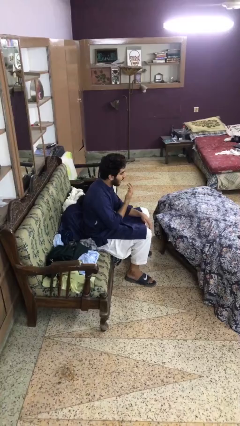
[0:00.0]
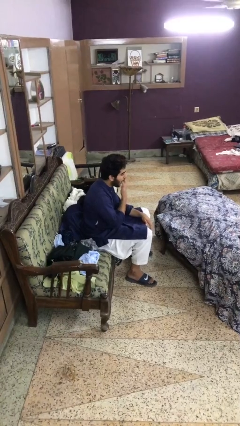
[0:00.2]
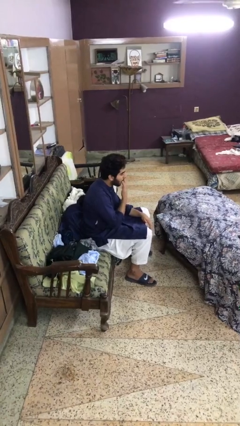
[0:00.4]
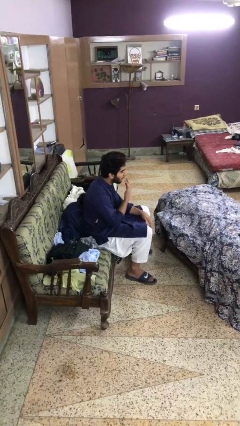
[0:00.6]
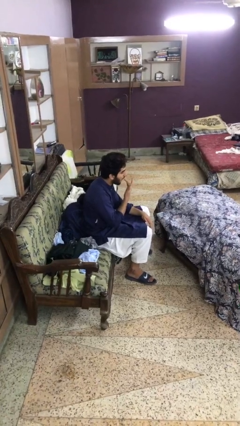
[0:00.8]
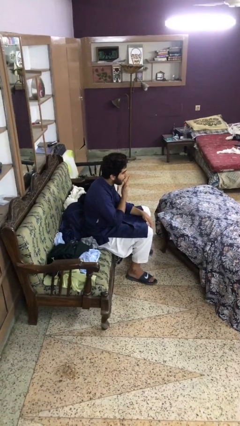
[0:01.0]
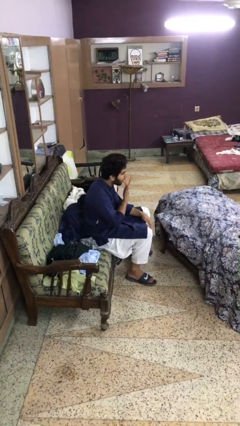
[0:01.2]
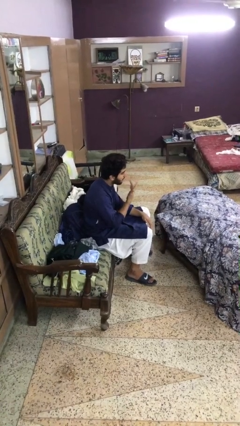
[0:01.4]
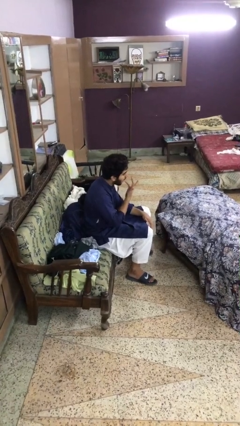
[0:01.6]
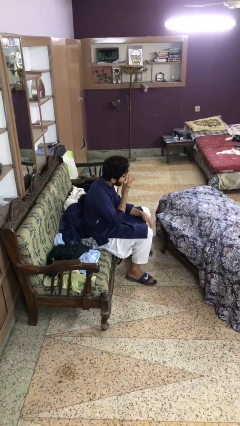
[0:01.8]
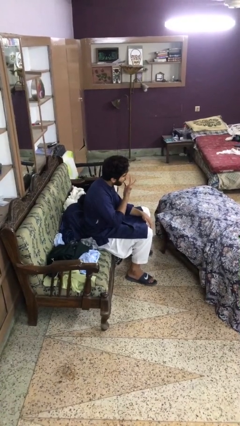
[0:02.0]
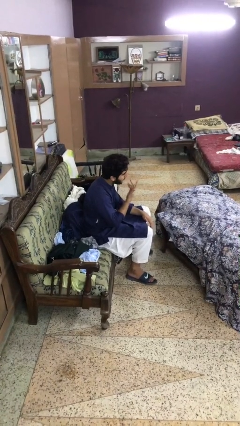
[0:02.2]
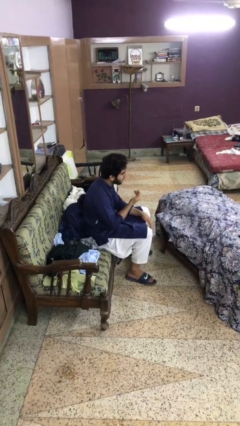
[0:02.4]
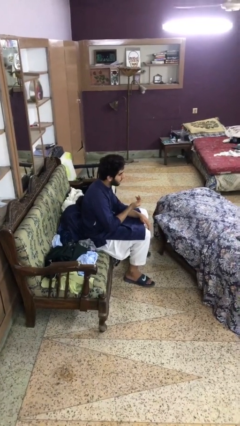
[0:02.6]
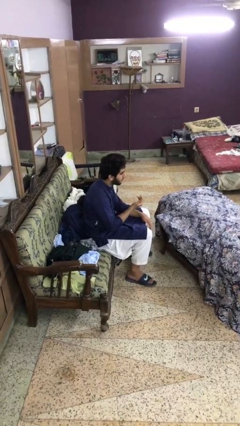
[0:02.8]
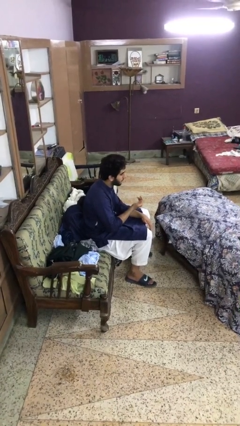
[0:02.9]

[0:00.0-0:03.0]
person licks fingers

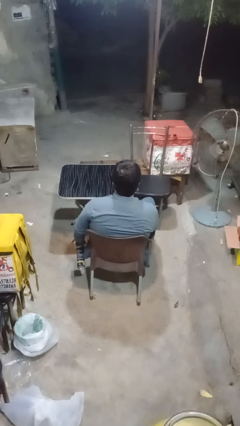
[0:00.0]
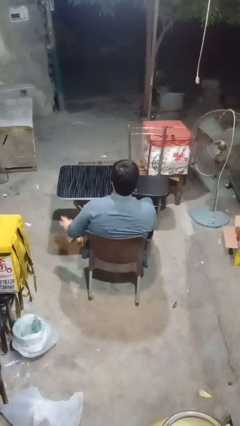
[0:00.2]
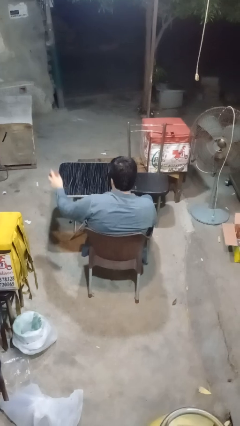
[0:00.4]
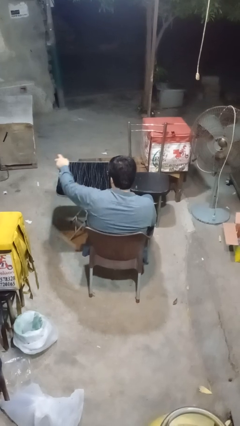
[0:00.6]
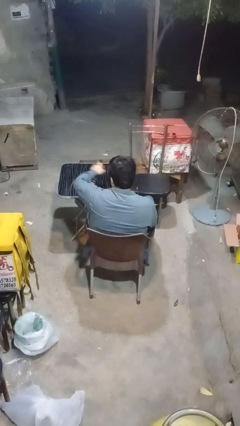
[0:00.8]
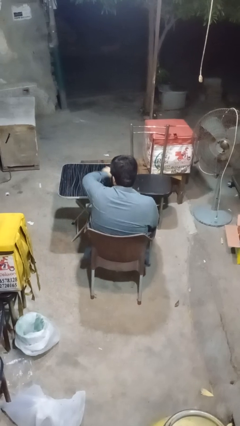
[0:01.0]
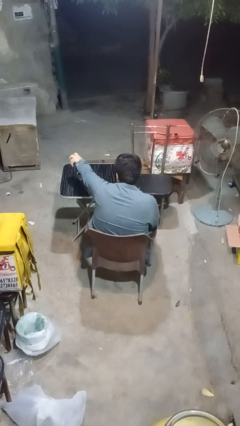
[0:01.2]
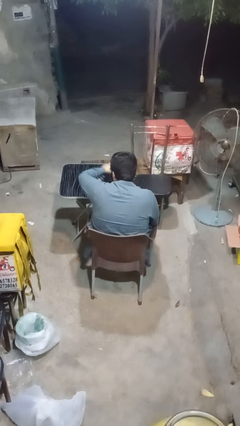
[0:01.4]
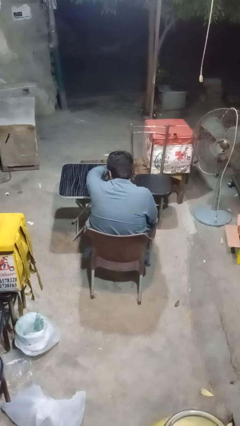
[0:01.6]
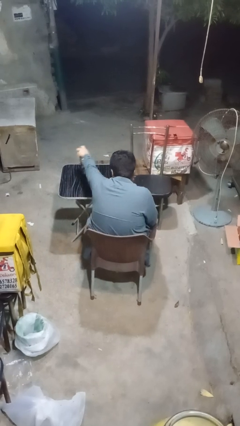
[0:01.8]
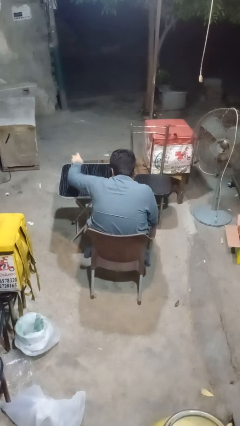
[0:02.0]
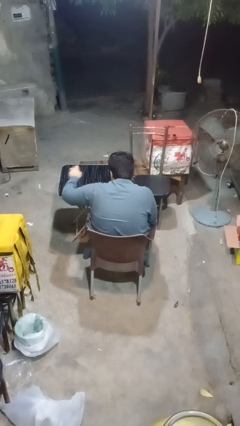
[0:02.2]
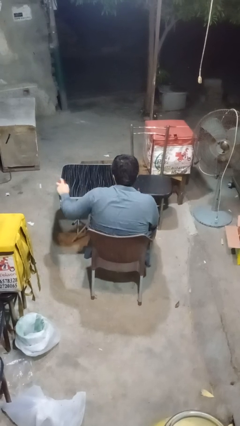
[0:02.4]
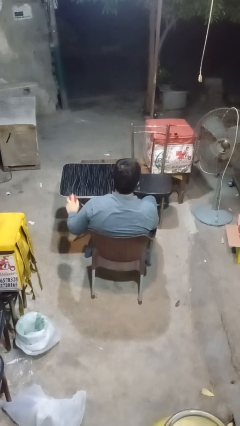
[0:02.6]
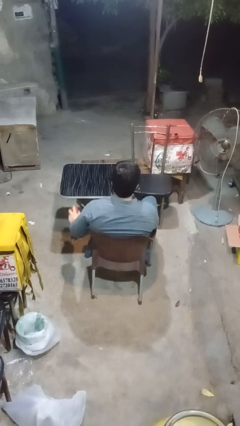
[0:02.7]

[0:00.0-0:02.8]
person sprays from bottle

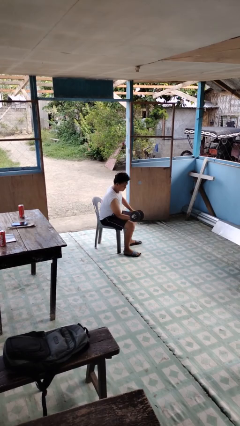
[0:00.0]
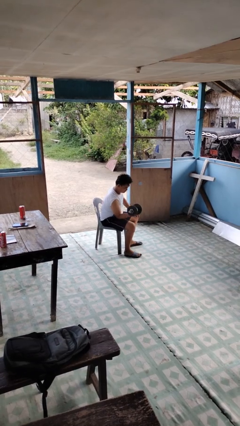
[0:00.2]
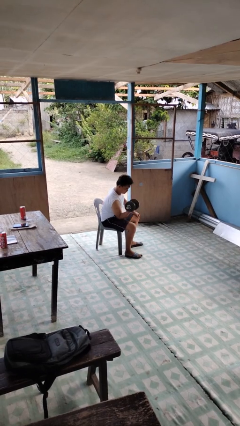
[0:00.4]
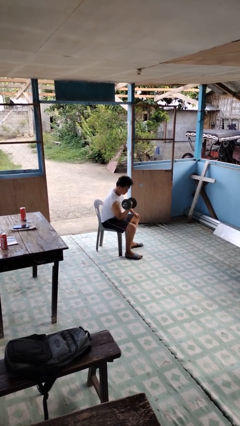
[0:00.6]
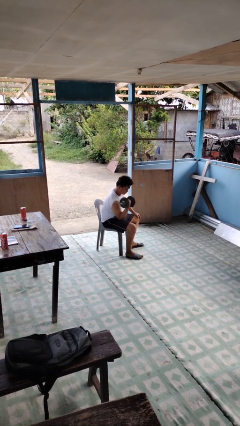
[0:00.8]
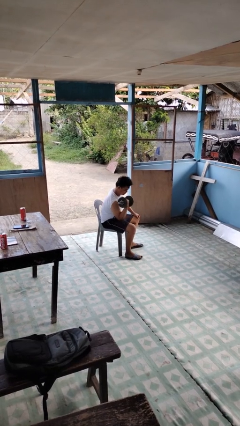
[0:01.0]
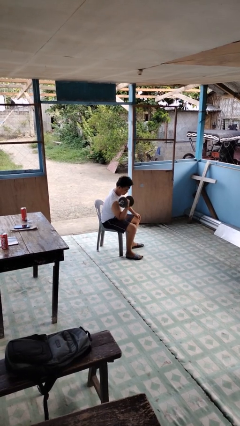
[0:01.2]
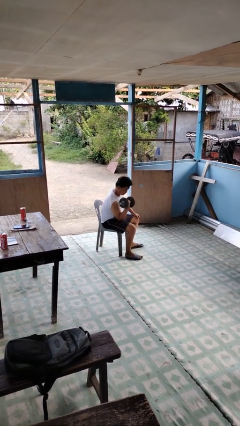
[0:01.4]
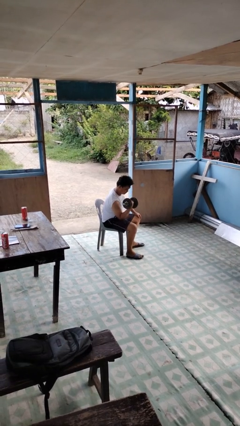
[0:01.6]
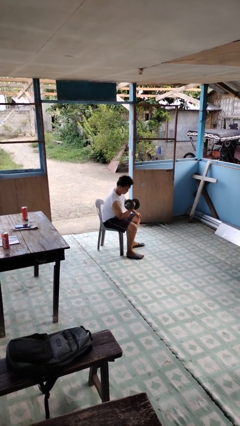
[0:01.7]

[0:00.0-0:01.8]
person lifts dumbbells

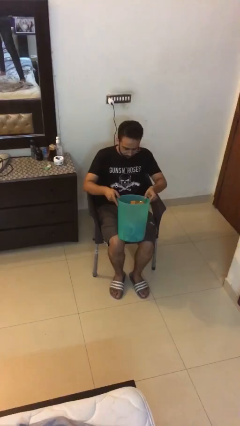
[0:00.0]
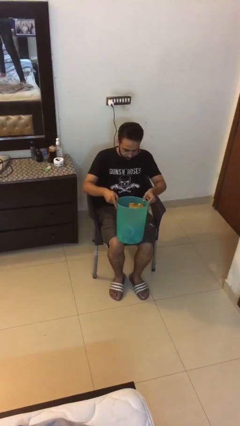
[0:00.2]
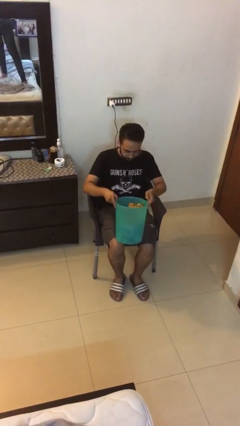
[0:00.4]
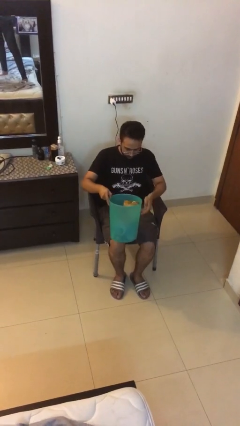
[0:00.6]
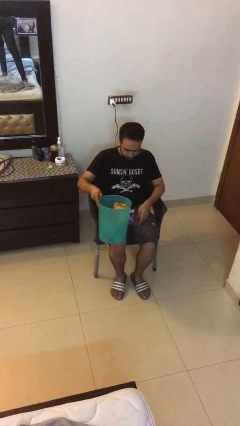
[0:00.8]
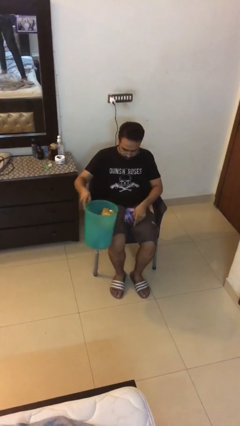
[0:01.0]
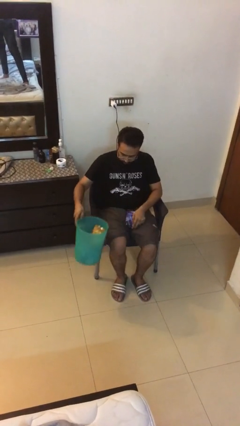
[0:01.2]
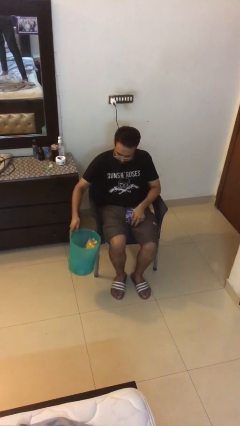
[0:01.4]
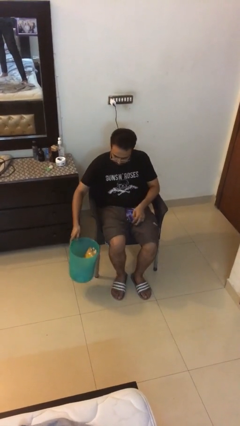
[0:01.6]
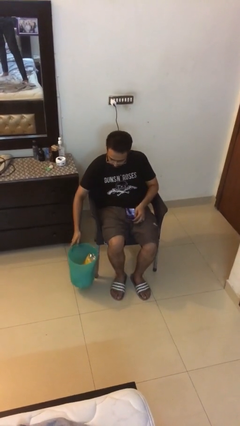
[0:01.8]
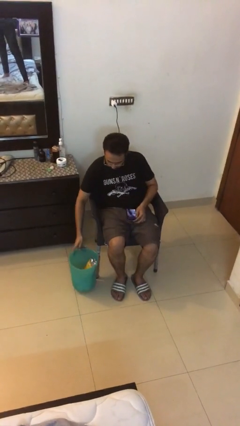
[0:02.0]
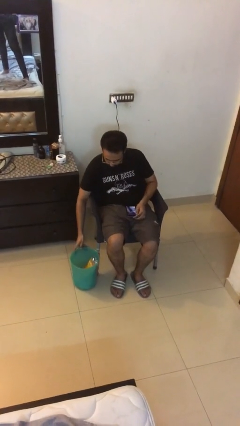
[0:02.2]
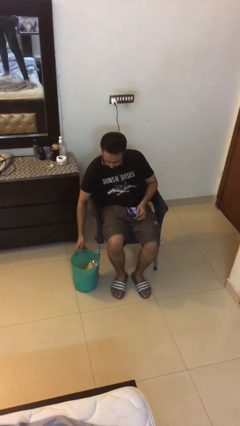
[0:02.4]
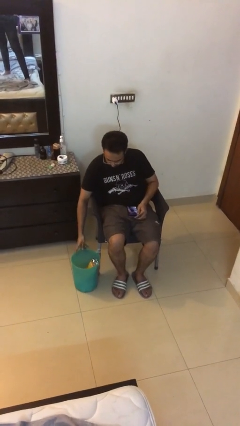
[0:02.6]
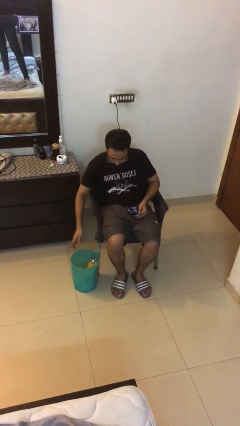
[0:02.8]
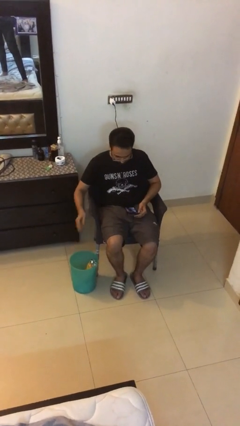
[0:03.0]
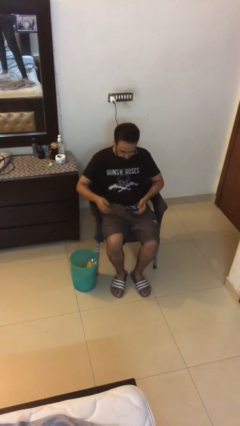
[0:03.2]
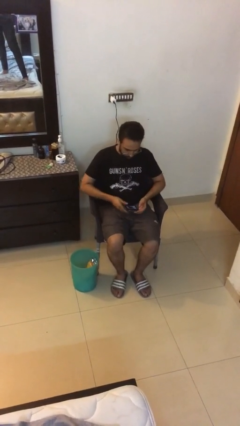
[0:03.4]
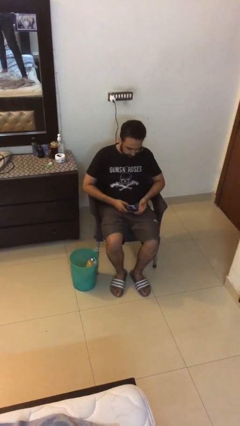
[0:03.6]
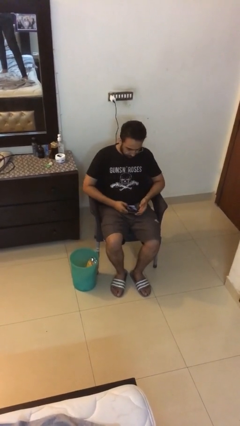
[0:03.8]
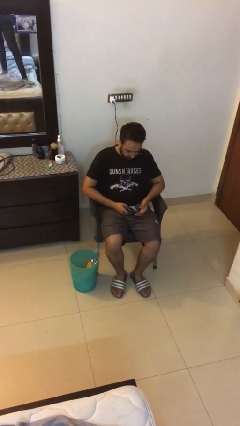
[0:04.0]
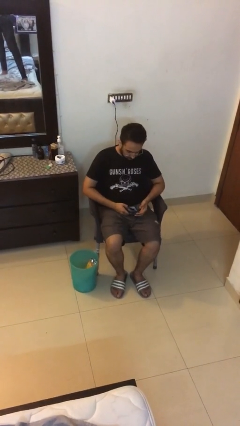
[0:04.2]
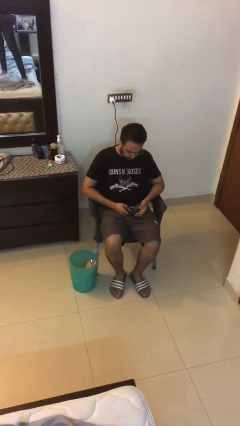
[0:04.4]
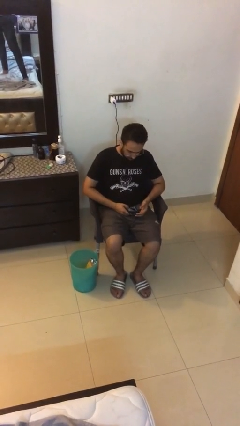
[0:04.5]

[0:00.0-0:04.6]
person puts down object on floor

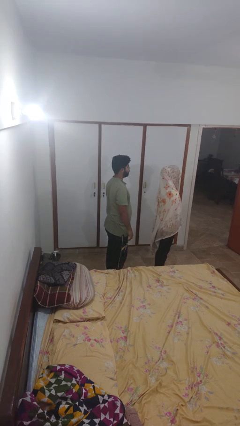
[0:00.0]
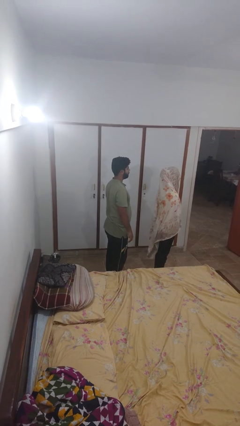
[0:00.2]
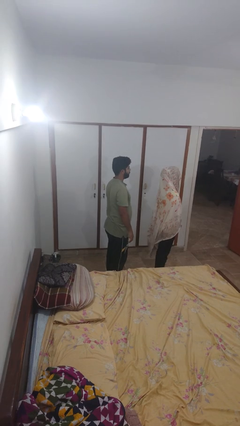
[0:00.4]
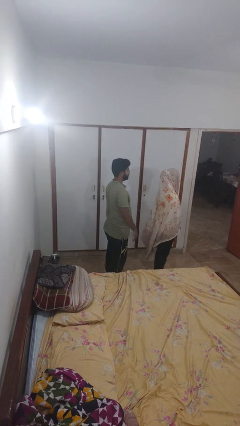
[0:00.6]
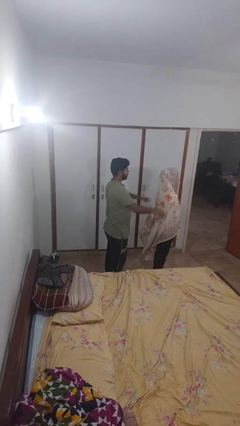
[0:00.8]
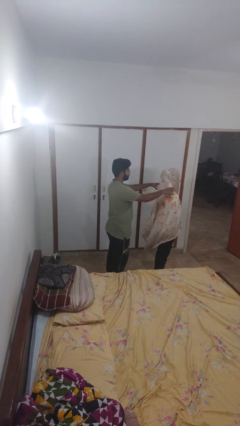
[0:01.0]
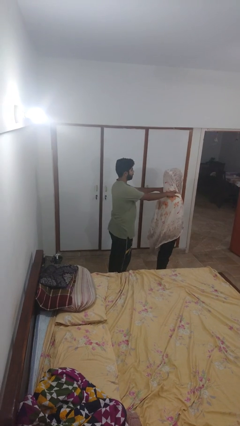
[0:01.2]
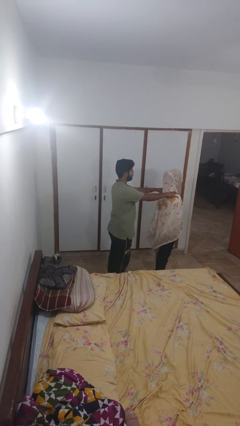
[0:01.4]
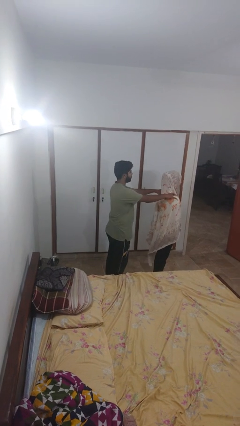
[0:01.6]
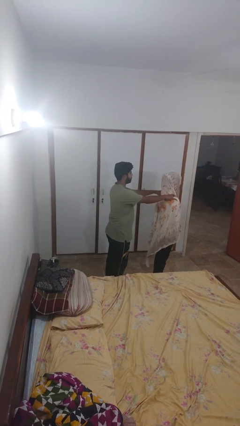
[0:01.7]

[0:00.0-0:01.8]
person grabs person by shoulder

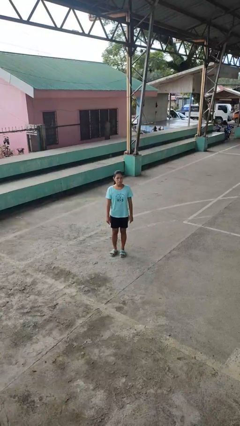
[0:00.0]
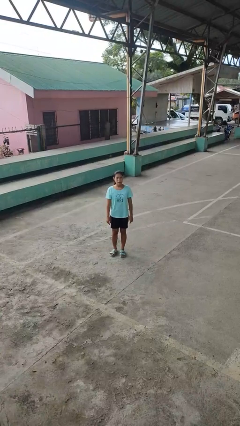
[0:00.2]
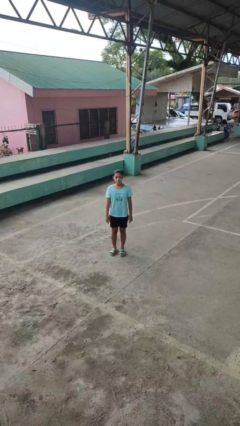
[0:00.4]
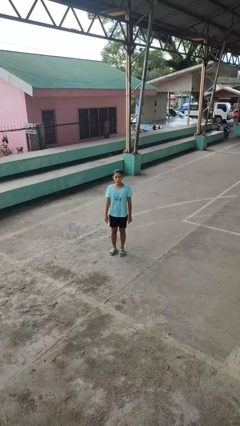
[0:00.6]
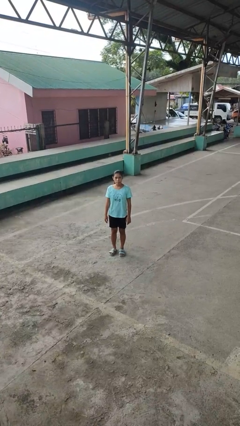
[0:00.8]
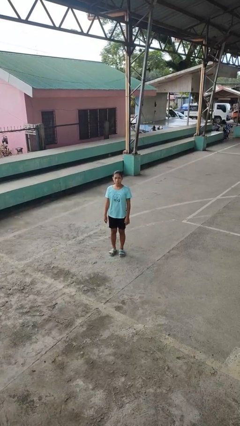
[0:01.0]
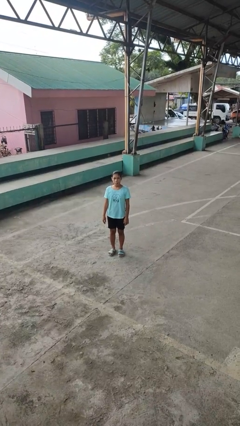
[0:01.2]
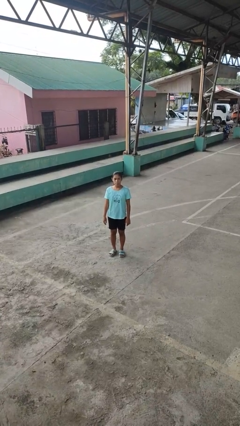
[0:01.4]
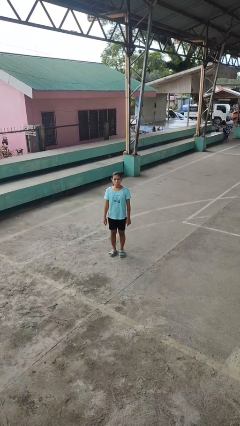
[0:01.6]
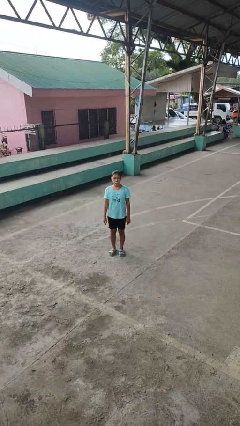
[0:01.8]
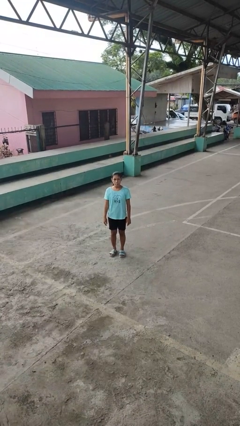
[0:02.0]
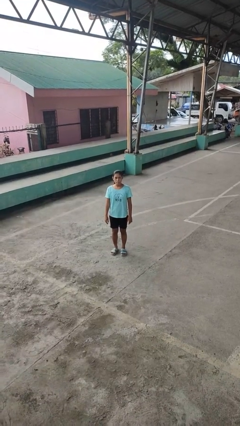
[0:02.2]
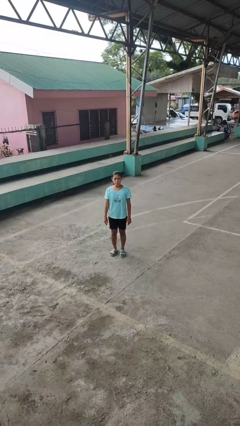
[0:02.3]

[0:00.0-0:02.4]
person sticks out tongue

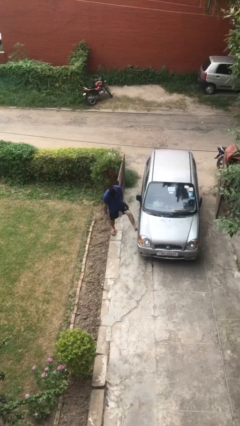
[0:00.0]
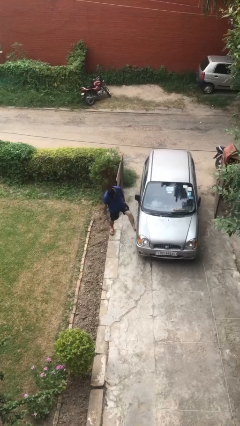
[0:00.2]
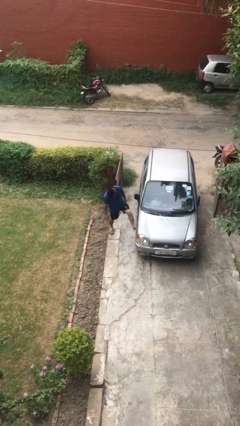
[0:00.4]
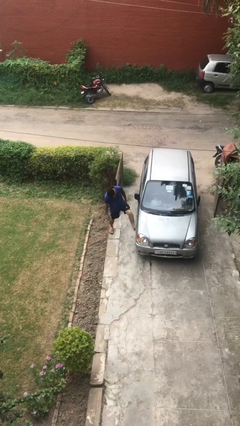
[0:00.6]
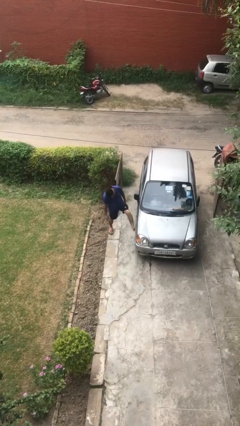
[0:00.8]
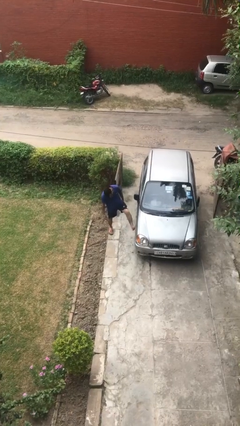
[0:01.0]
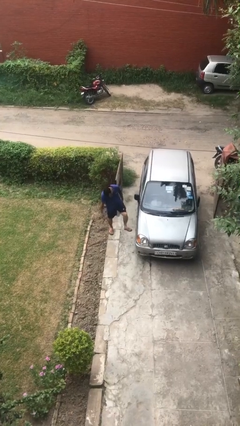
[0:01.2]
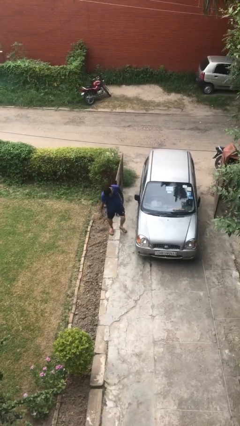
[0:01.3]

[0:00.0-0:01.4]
person kicks car tires
